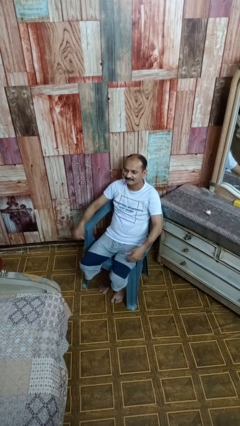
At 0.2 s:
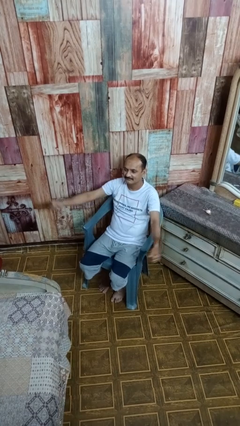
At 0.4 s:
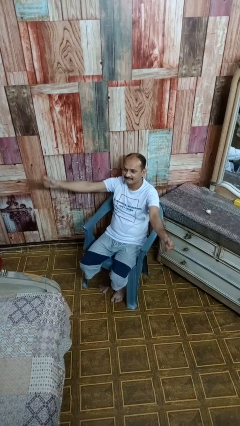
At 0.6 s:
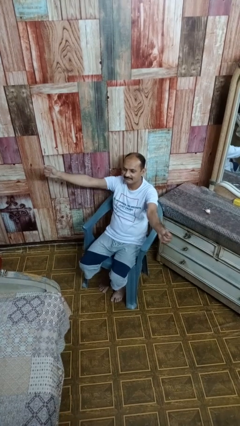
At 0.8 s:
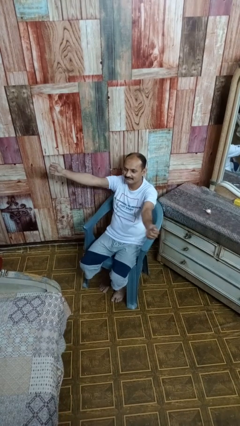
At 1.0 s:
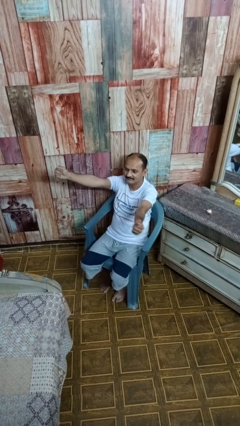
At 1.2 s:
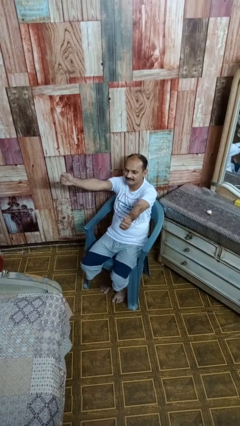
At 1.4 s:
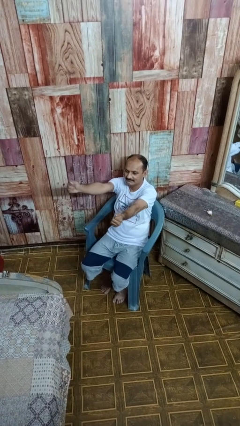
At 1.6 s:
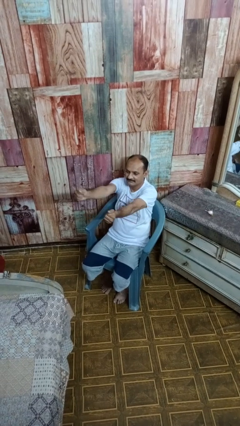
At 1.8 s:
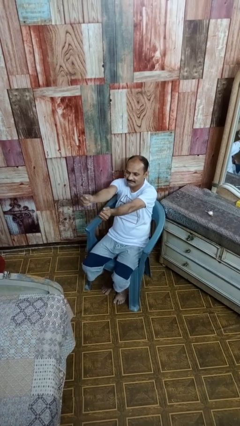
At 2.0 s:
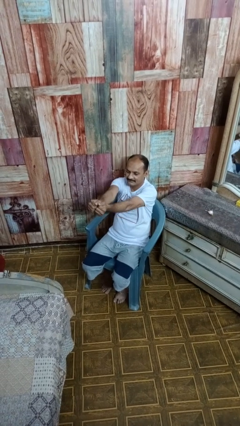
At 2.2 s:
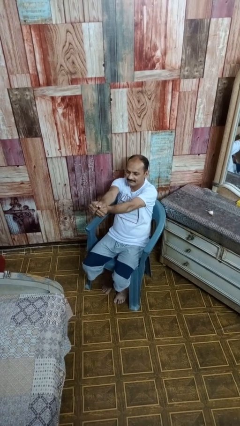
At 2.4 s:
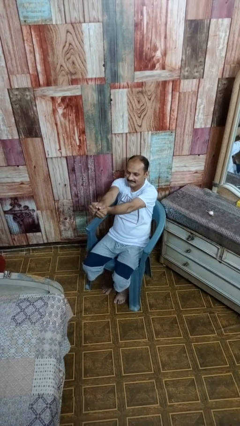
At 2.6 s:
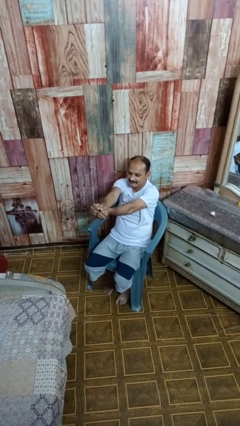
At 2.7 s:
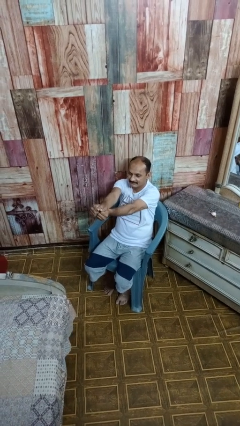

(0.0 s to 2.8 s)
person gestures zoom in

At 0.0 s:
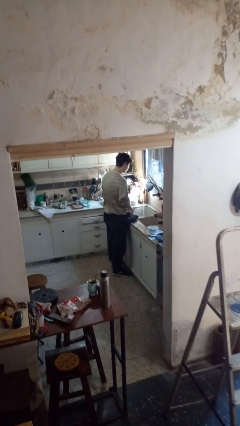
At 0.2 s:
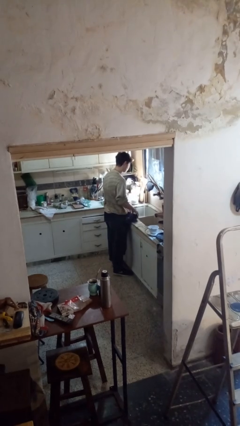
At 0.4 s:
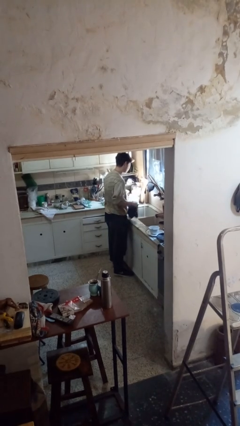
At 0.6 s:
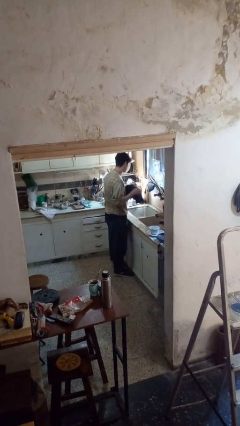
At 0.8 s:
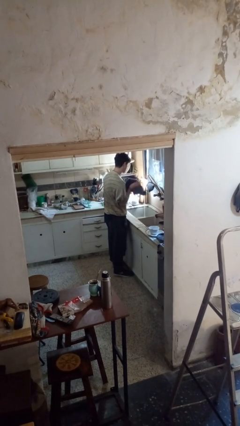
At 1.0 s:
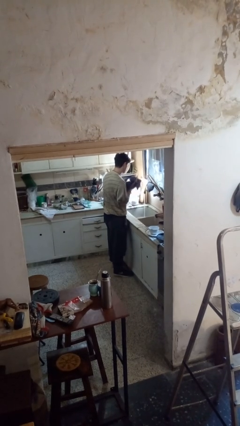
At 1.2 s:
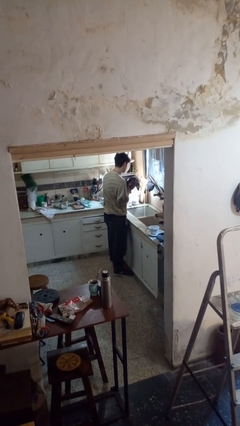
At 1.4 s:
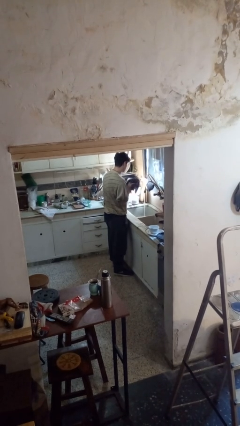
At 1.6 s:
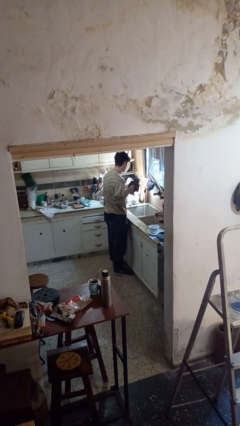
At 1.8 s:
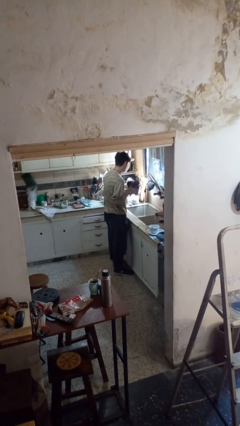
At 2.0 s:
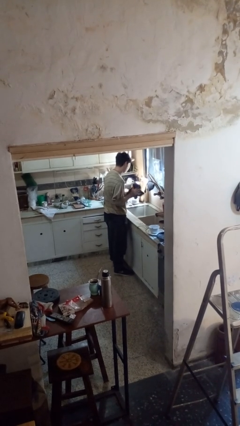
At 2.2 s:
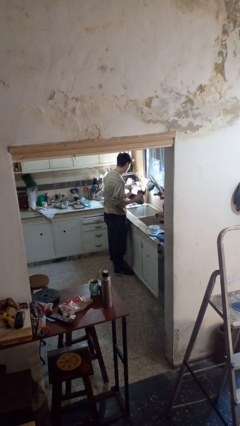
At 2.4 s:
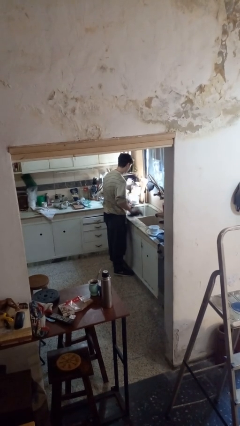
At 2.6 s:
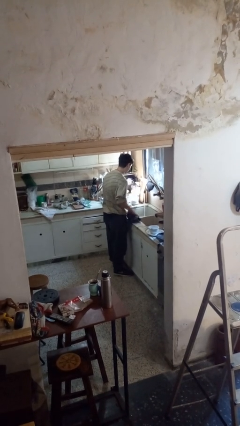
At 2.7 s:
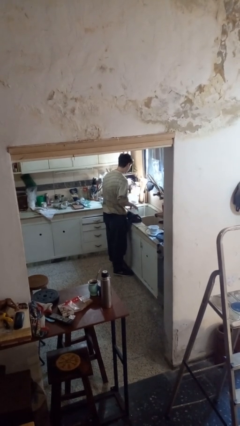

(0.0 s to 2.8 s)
person dries hands with towel

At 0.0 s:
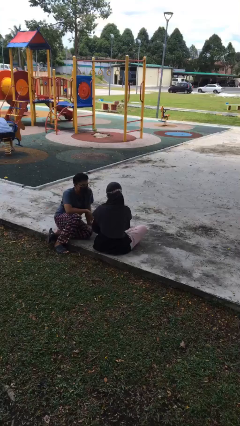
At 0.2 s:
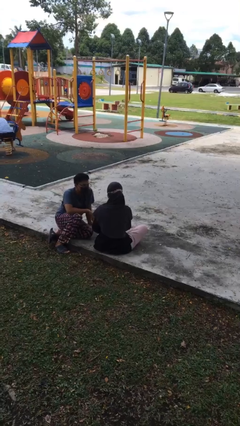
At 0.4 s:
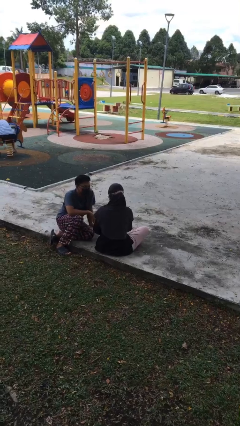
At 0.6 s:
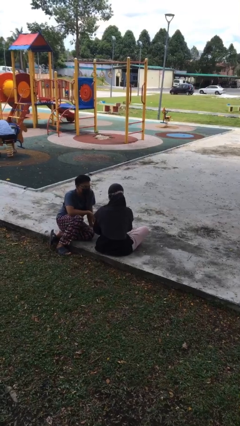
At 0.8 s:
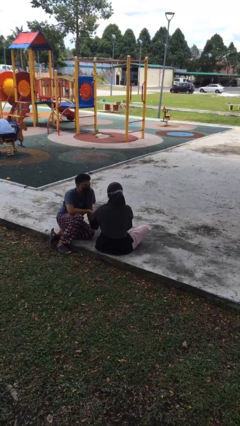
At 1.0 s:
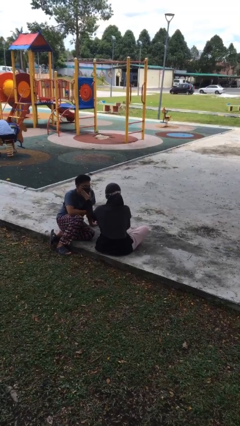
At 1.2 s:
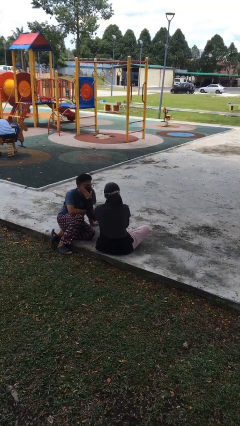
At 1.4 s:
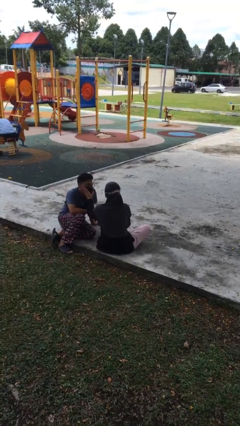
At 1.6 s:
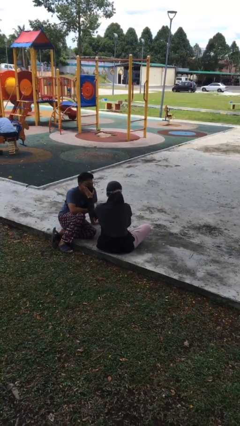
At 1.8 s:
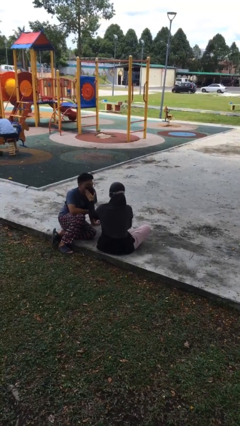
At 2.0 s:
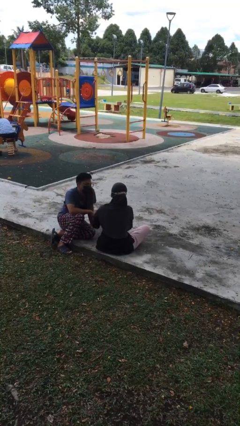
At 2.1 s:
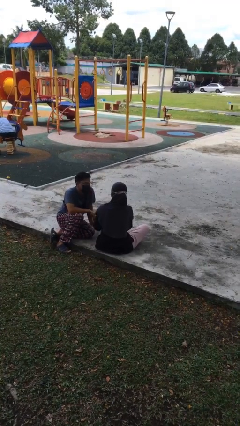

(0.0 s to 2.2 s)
person touches face of person

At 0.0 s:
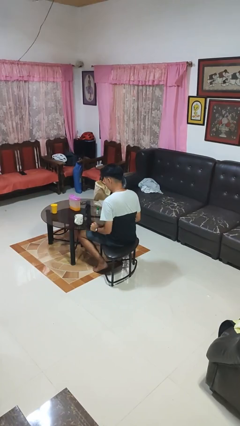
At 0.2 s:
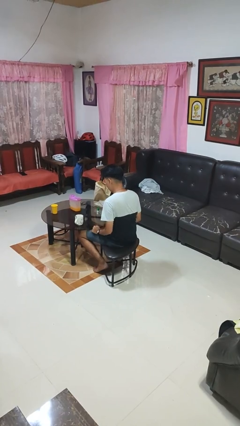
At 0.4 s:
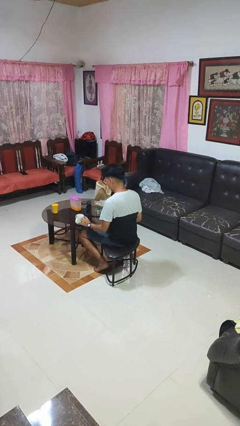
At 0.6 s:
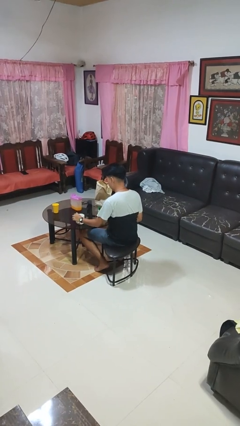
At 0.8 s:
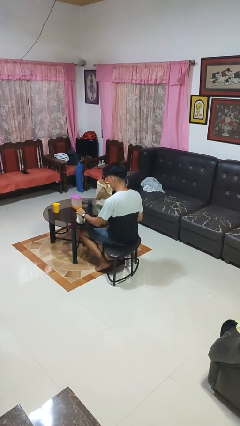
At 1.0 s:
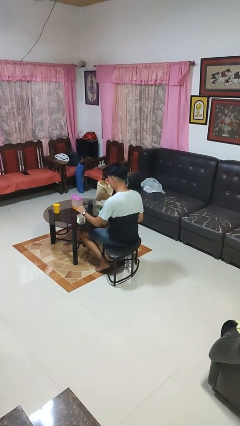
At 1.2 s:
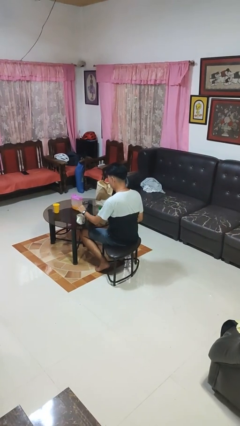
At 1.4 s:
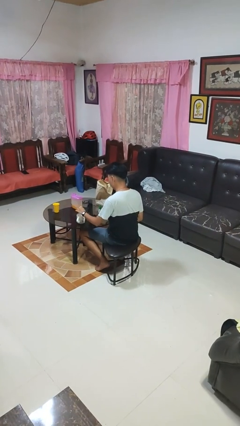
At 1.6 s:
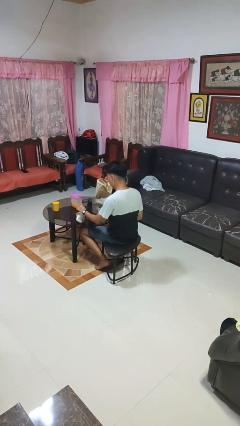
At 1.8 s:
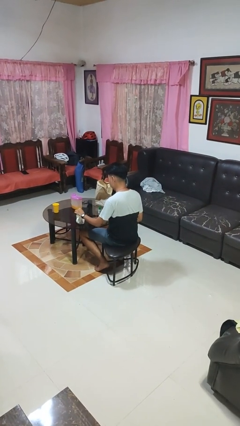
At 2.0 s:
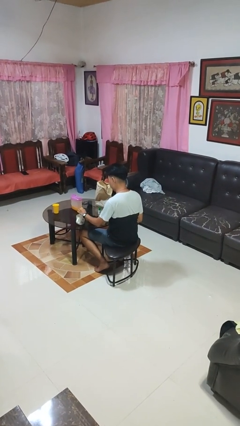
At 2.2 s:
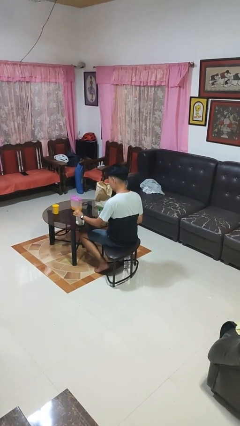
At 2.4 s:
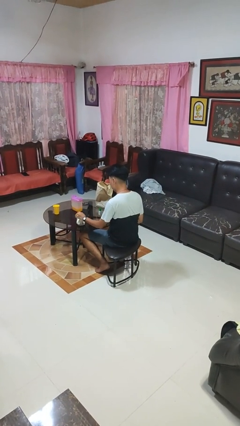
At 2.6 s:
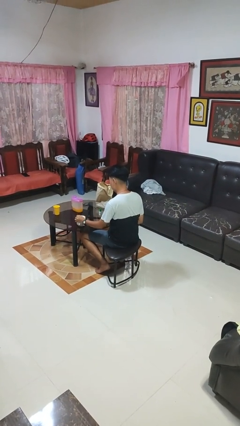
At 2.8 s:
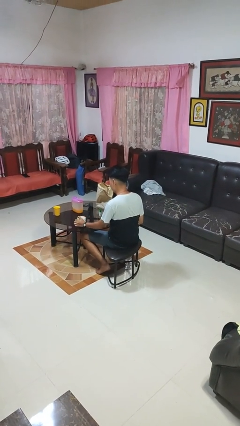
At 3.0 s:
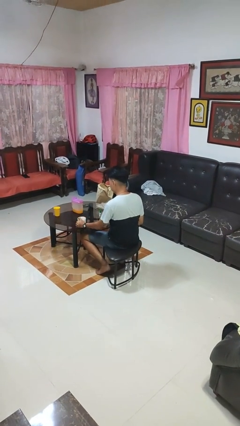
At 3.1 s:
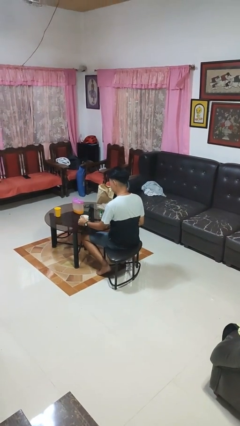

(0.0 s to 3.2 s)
person stirs mug

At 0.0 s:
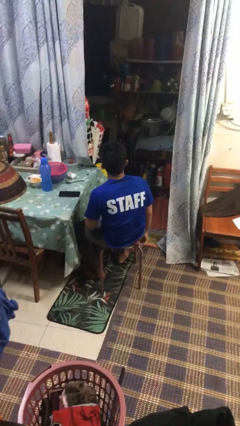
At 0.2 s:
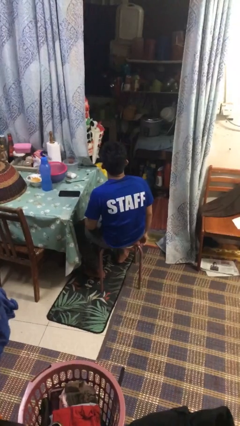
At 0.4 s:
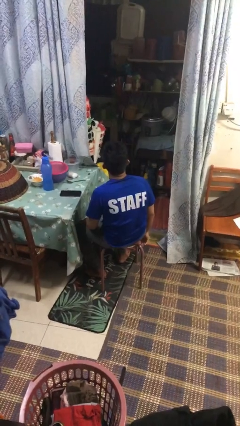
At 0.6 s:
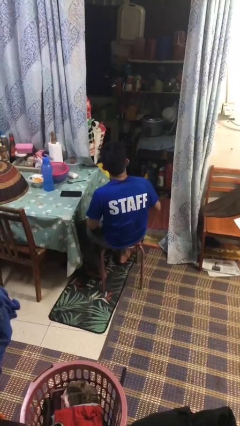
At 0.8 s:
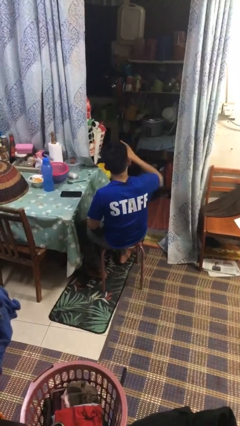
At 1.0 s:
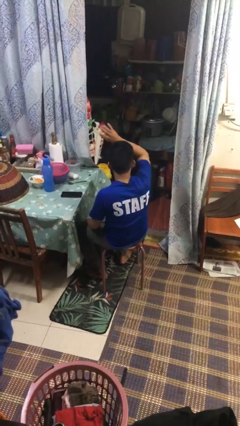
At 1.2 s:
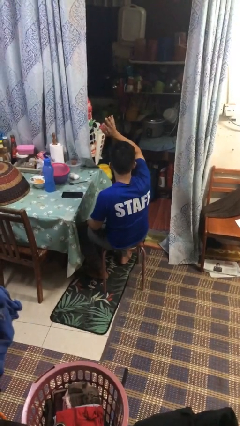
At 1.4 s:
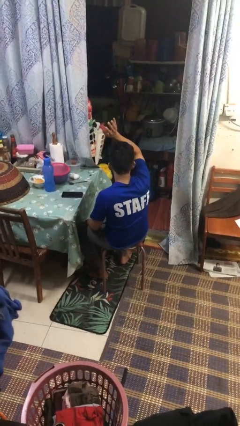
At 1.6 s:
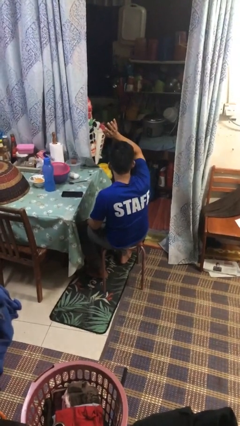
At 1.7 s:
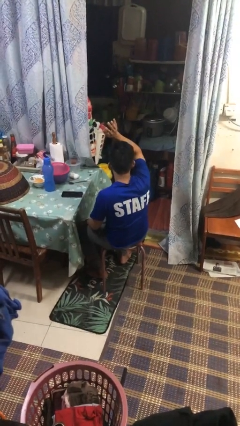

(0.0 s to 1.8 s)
person gestures raise hand

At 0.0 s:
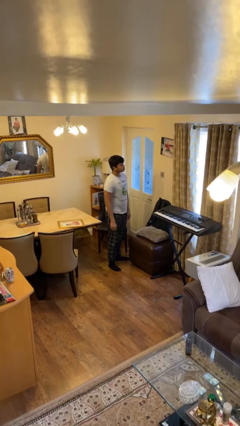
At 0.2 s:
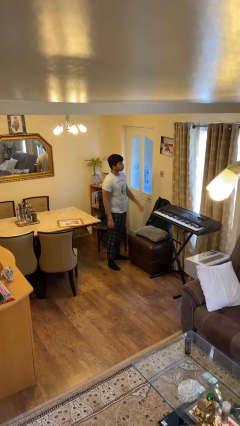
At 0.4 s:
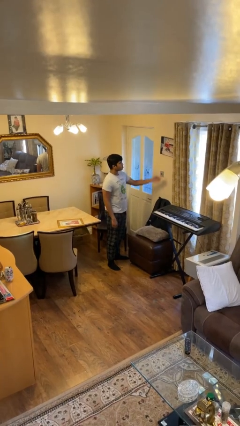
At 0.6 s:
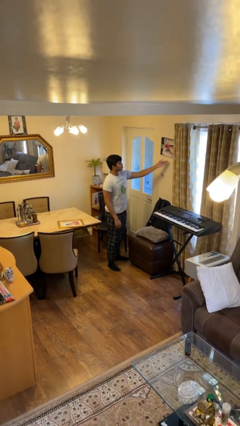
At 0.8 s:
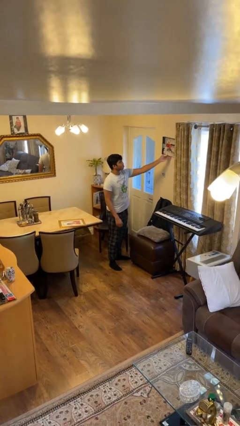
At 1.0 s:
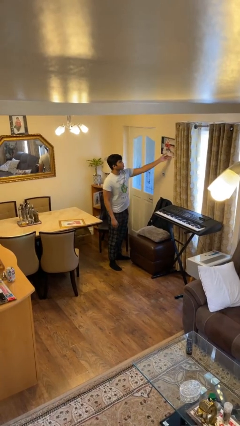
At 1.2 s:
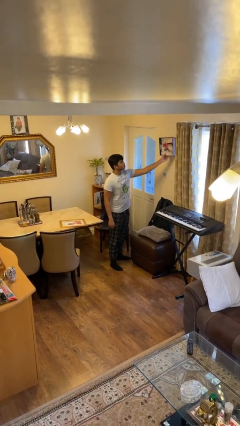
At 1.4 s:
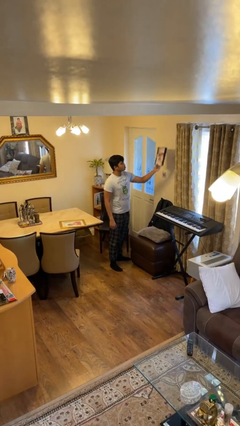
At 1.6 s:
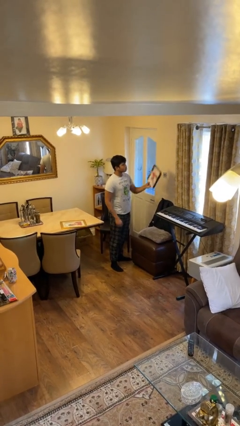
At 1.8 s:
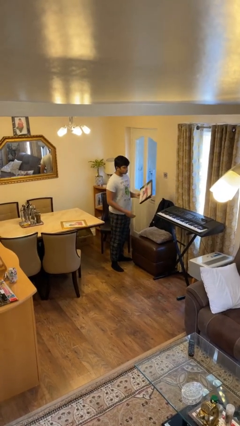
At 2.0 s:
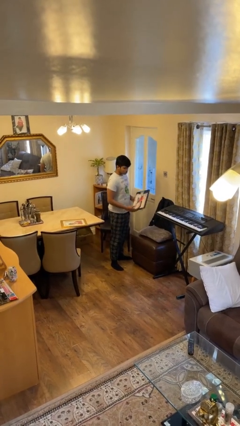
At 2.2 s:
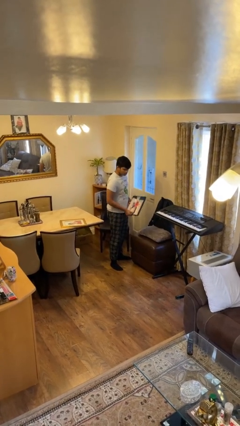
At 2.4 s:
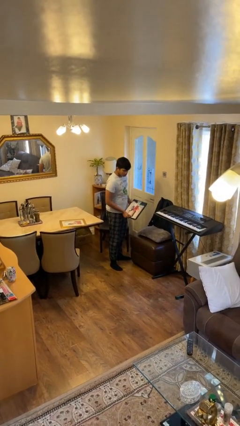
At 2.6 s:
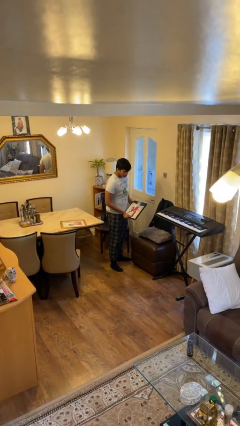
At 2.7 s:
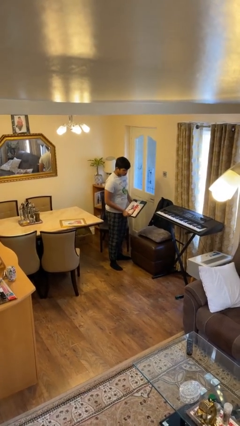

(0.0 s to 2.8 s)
person puts up picture frame

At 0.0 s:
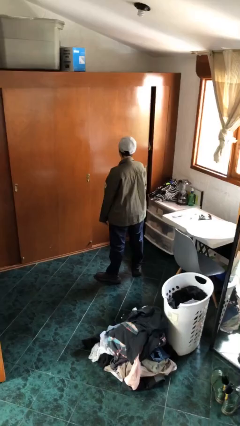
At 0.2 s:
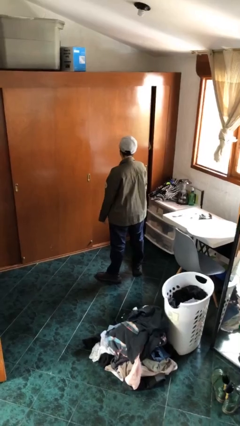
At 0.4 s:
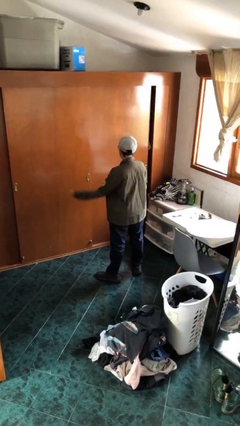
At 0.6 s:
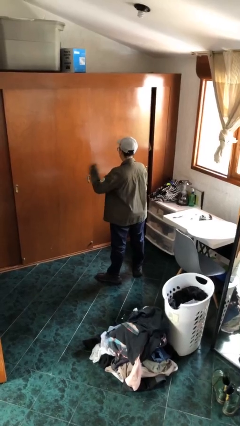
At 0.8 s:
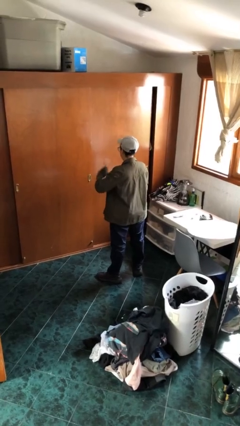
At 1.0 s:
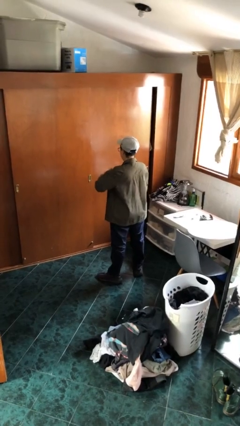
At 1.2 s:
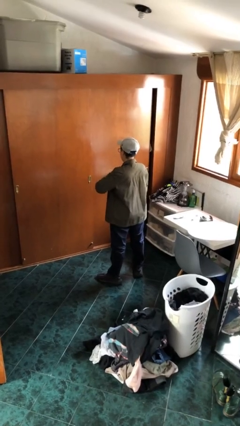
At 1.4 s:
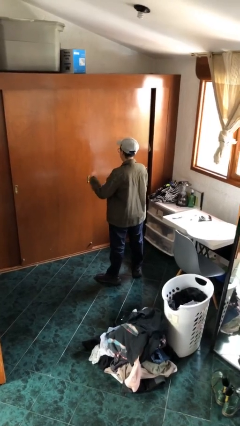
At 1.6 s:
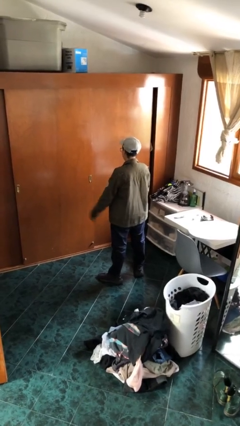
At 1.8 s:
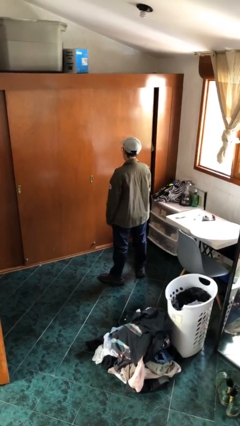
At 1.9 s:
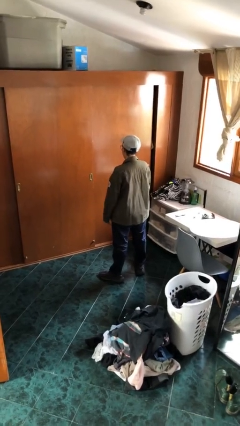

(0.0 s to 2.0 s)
person drums on chest
